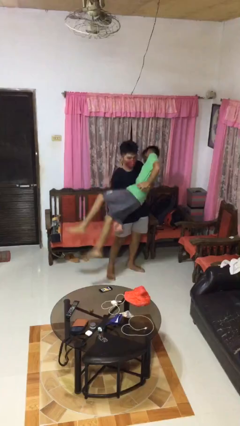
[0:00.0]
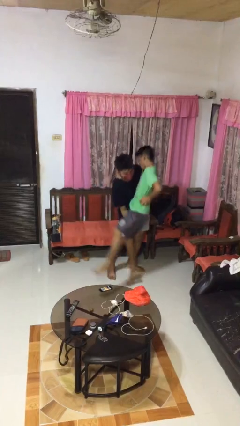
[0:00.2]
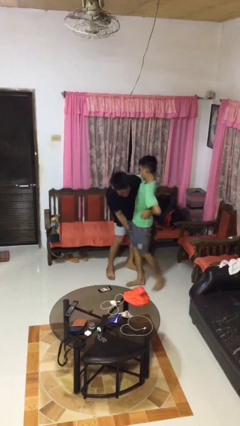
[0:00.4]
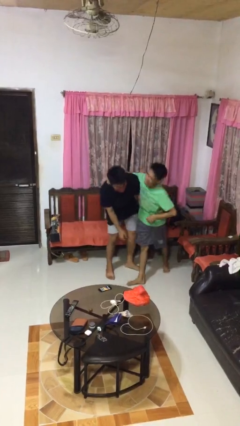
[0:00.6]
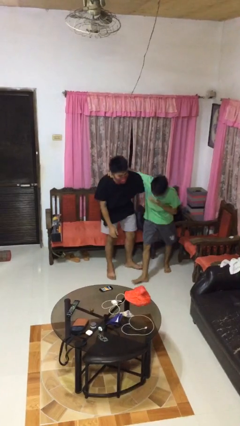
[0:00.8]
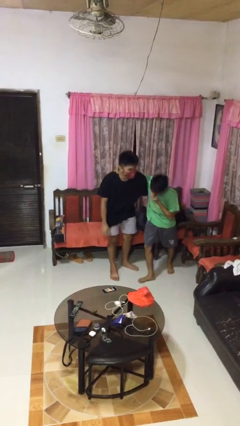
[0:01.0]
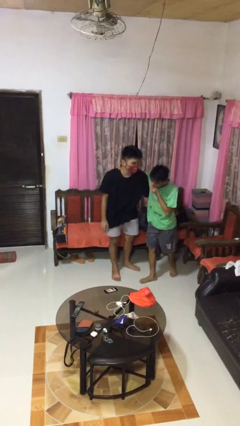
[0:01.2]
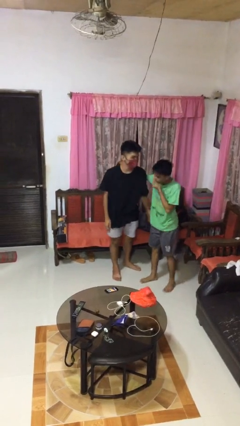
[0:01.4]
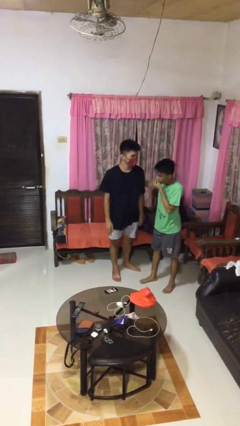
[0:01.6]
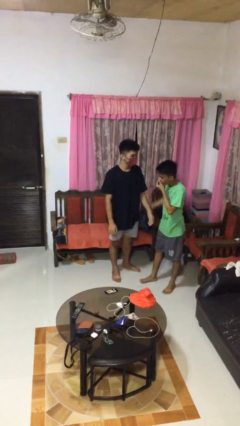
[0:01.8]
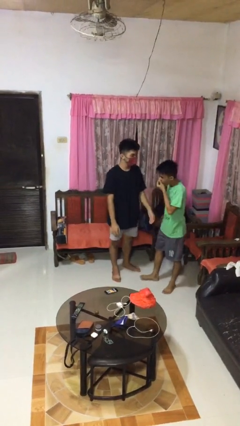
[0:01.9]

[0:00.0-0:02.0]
person puts down person

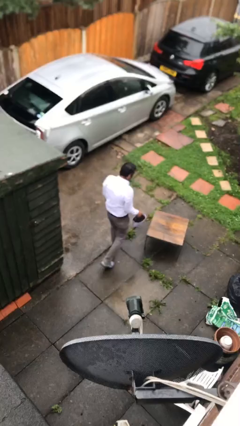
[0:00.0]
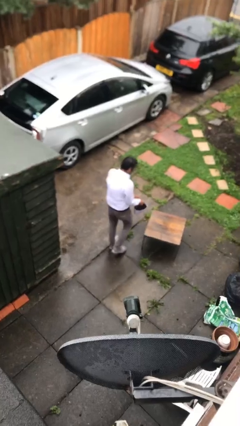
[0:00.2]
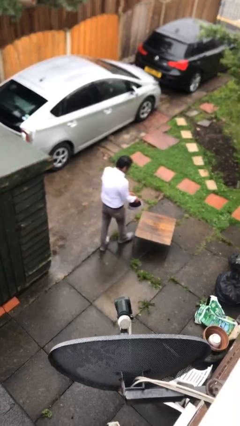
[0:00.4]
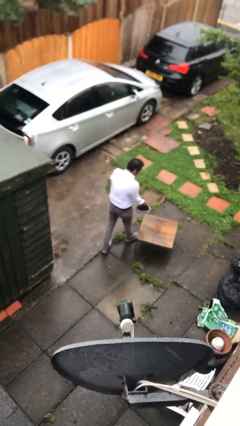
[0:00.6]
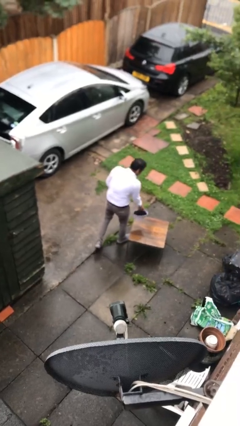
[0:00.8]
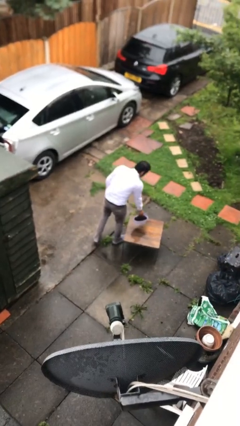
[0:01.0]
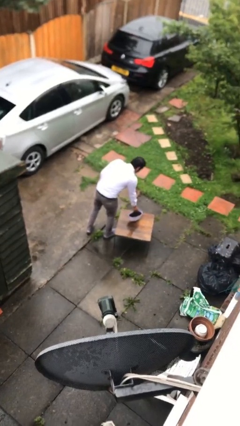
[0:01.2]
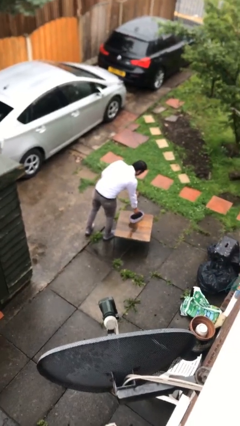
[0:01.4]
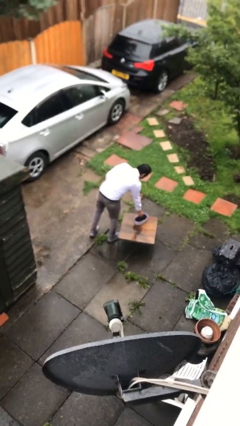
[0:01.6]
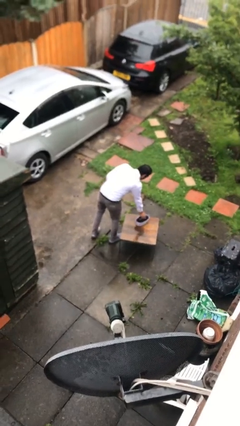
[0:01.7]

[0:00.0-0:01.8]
person puts down object on table

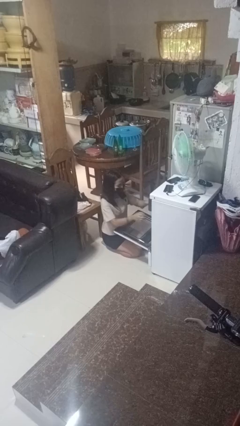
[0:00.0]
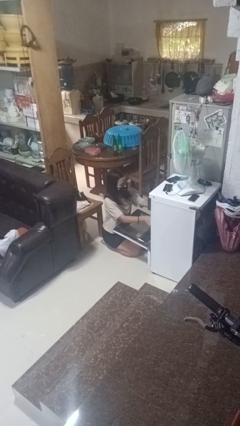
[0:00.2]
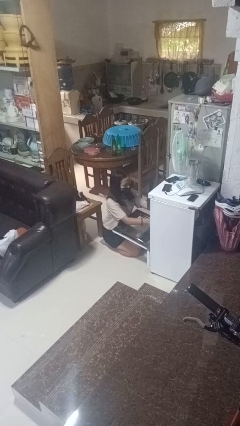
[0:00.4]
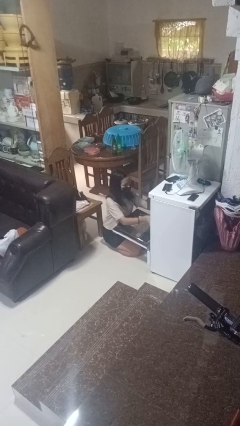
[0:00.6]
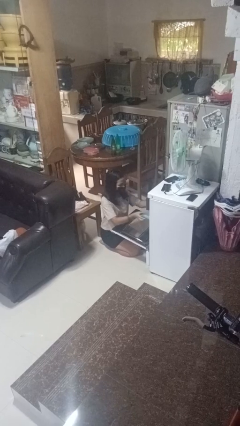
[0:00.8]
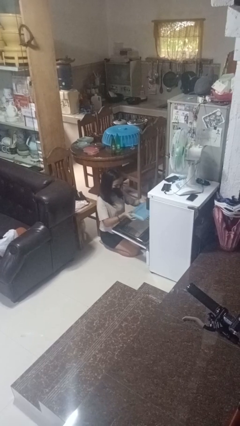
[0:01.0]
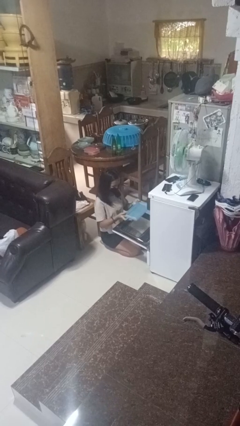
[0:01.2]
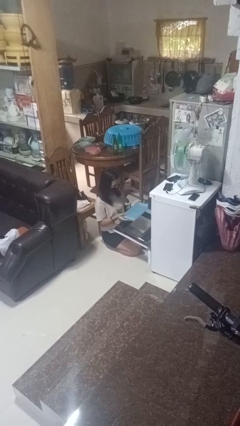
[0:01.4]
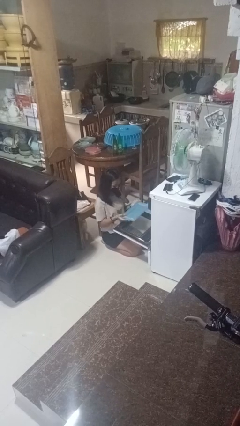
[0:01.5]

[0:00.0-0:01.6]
person takes object from oven

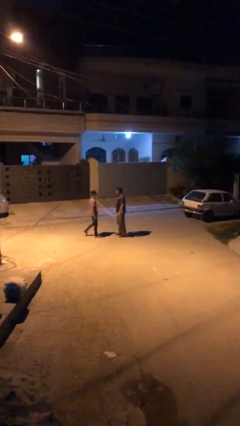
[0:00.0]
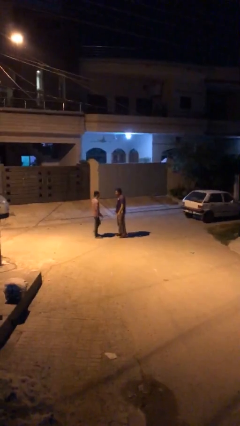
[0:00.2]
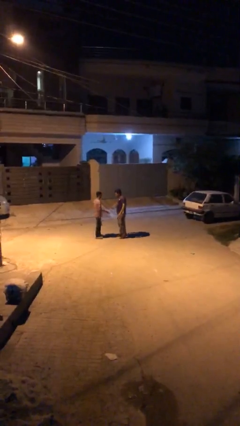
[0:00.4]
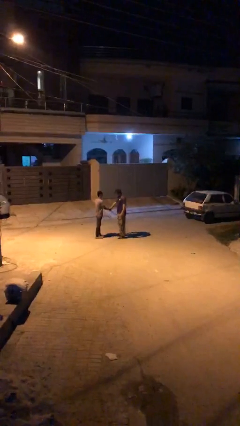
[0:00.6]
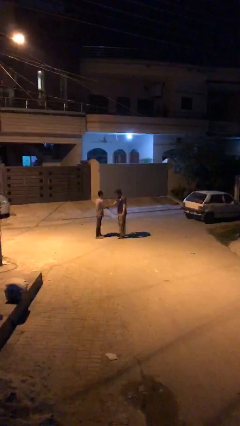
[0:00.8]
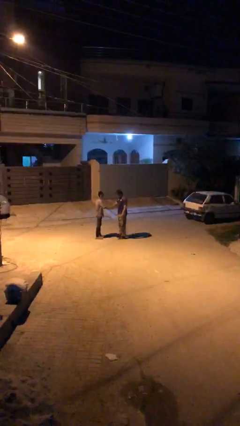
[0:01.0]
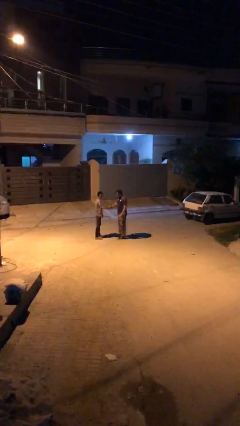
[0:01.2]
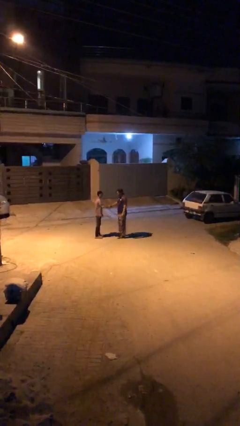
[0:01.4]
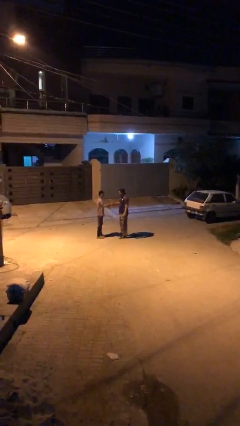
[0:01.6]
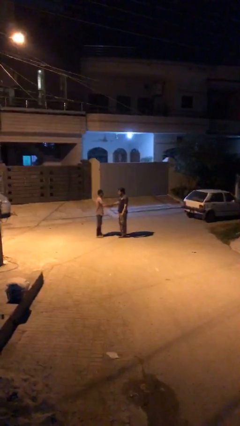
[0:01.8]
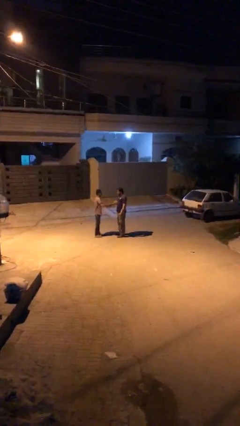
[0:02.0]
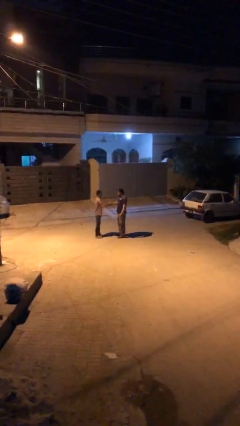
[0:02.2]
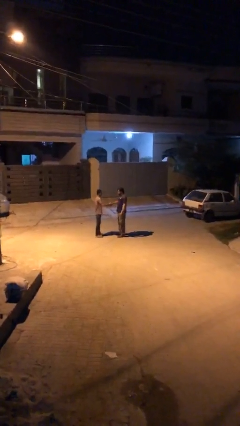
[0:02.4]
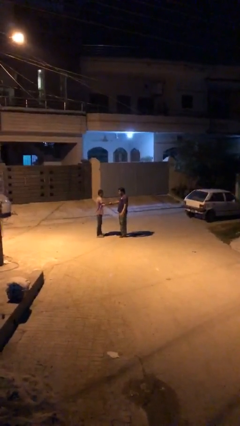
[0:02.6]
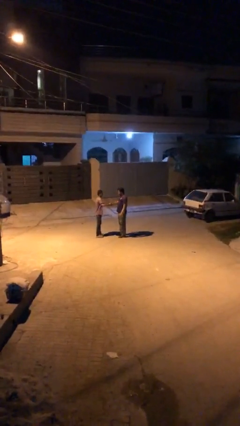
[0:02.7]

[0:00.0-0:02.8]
person shakes hand

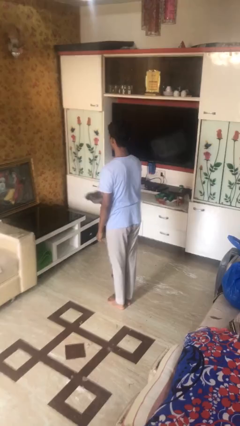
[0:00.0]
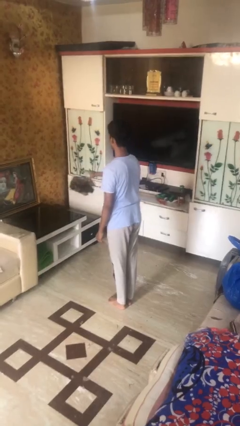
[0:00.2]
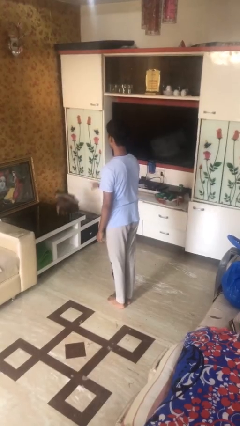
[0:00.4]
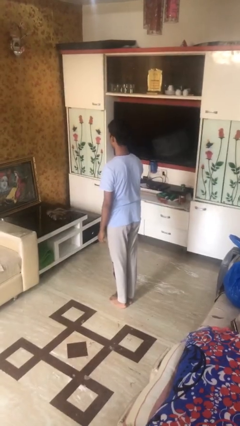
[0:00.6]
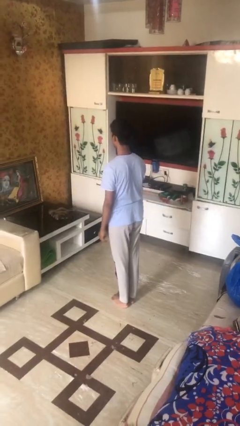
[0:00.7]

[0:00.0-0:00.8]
person throws object on table

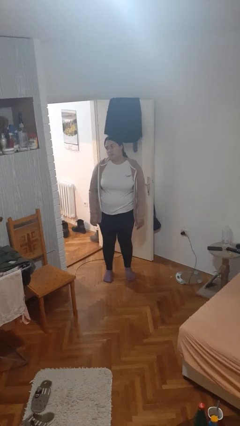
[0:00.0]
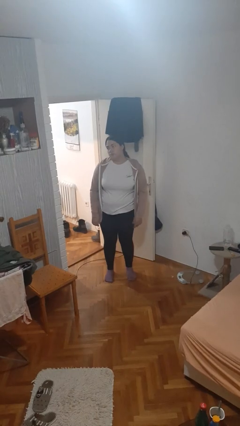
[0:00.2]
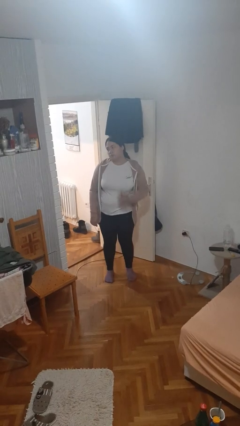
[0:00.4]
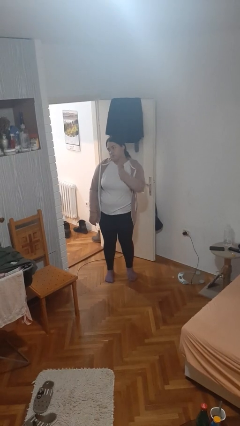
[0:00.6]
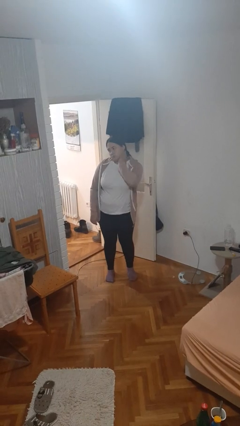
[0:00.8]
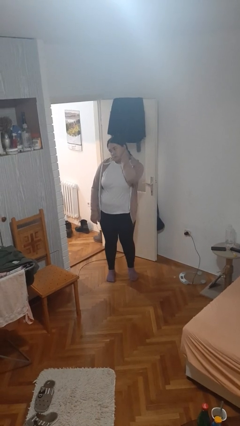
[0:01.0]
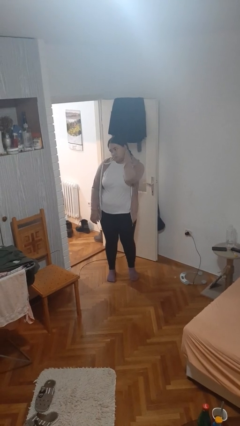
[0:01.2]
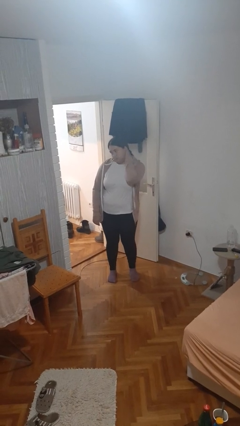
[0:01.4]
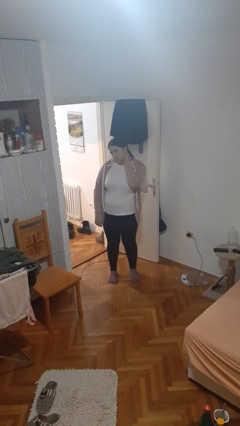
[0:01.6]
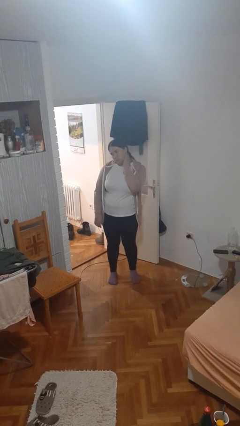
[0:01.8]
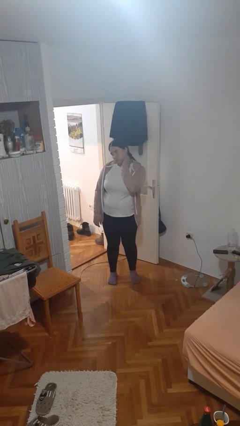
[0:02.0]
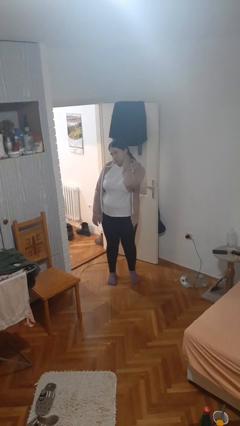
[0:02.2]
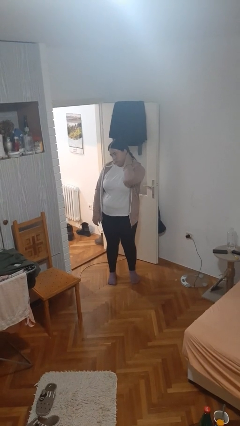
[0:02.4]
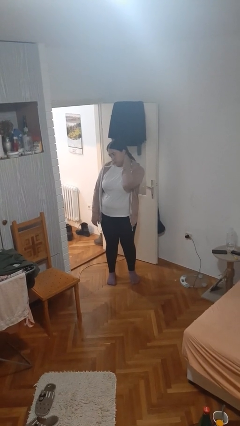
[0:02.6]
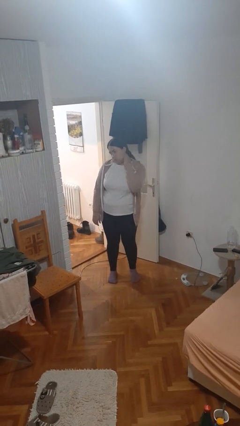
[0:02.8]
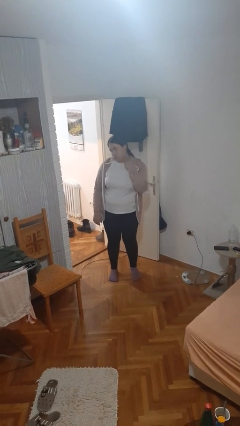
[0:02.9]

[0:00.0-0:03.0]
person rubs neck

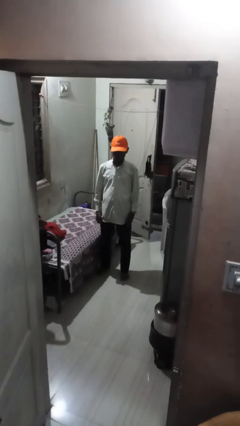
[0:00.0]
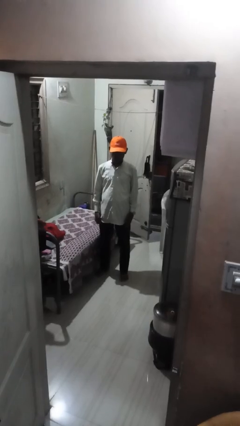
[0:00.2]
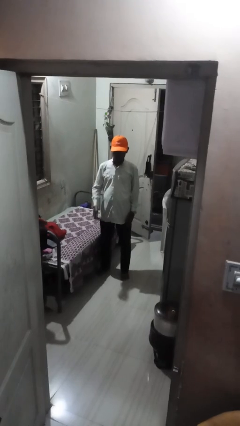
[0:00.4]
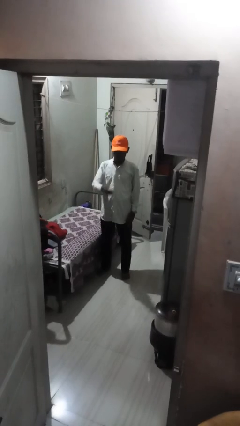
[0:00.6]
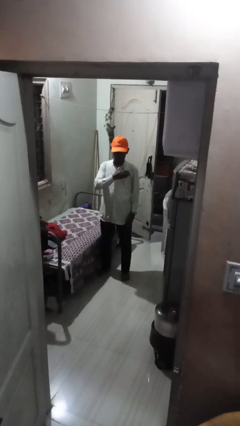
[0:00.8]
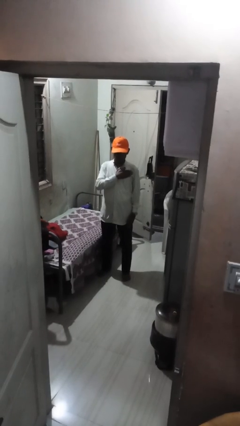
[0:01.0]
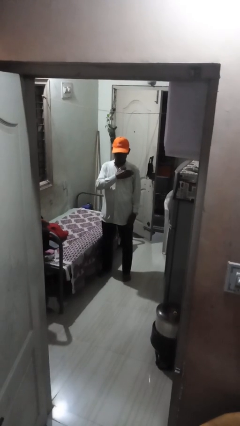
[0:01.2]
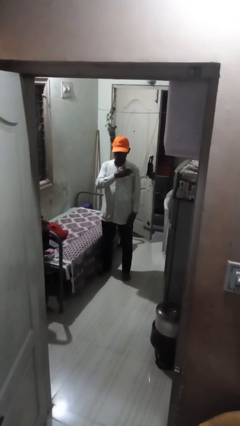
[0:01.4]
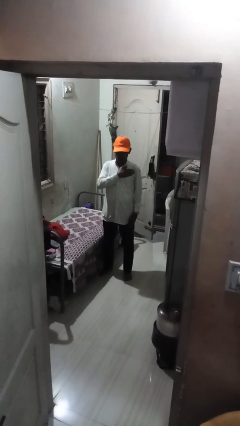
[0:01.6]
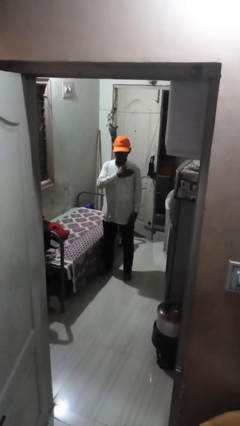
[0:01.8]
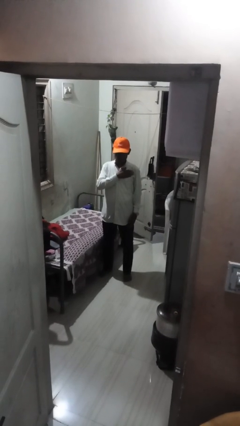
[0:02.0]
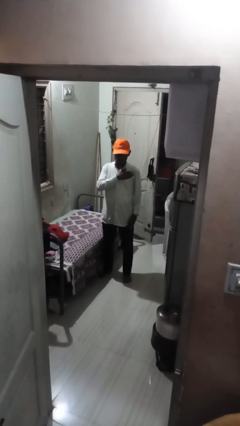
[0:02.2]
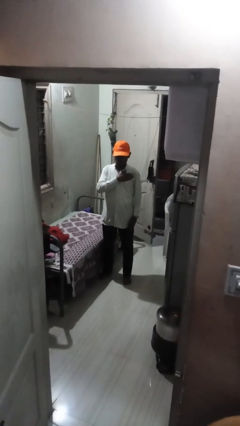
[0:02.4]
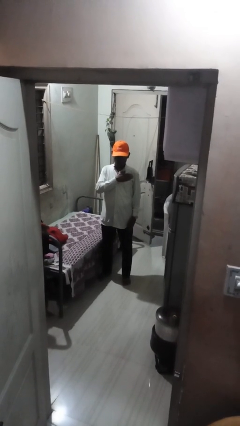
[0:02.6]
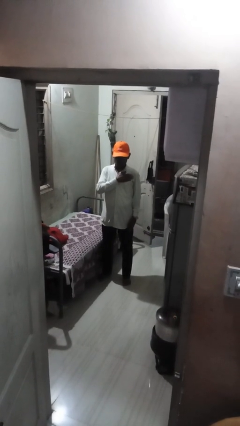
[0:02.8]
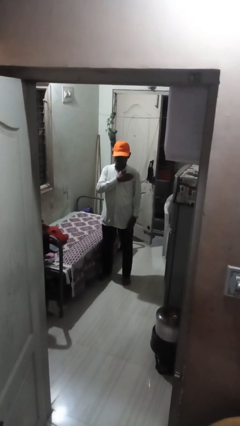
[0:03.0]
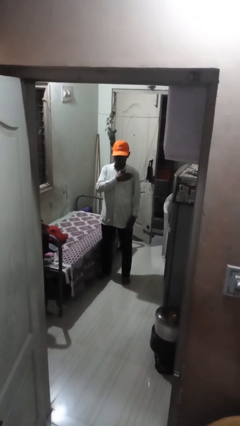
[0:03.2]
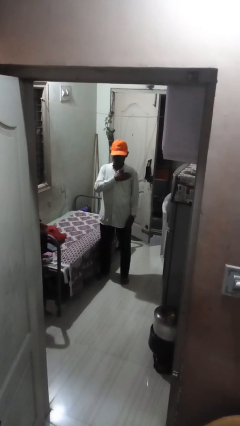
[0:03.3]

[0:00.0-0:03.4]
person drums on chest

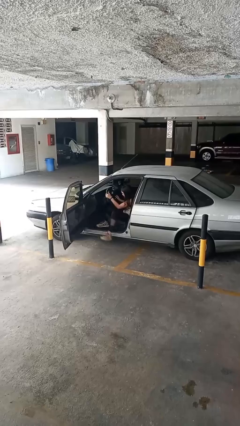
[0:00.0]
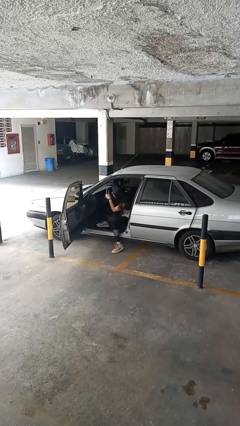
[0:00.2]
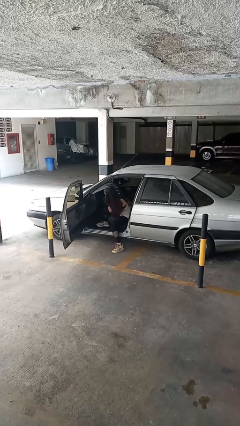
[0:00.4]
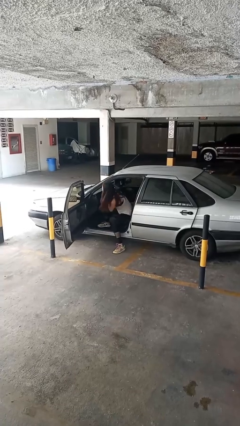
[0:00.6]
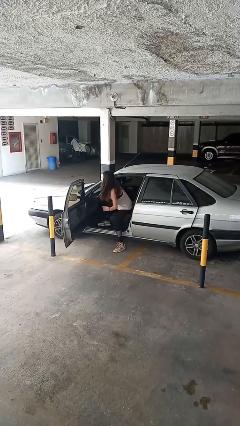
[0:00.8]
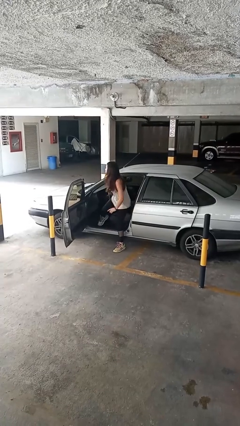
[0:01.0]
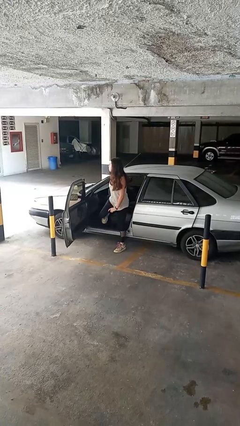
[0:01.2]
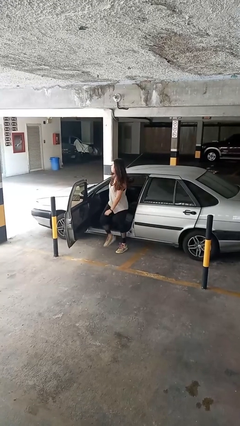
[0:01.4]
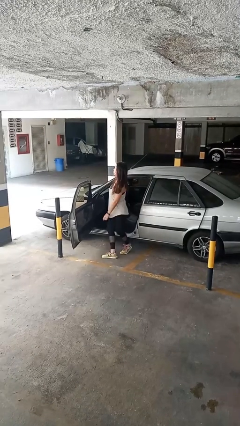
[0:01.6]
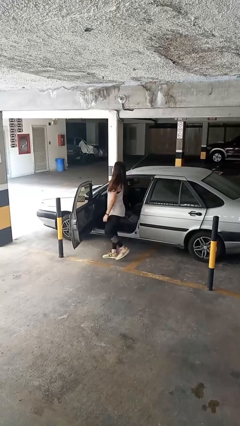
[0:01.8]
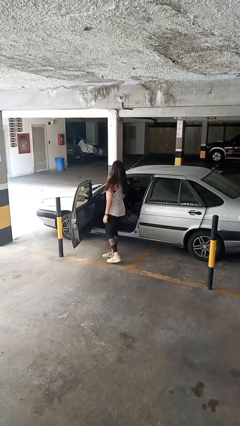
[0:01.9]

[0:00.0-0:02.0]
person exits car
